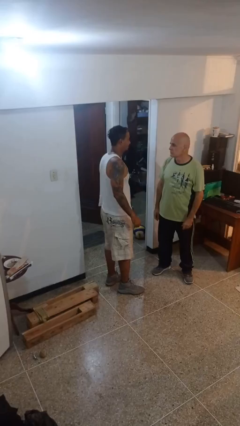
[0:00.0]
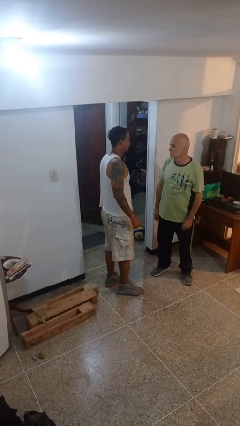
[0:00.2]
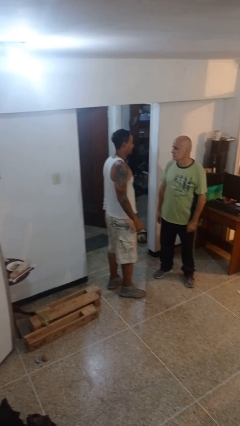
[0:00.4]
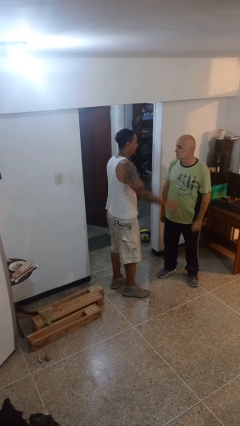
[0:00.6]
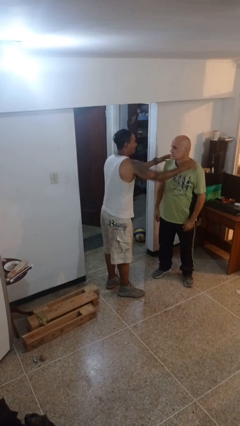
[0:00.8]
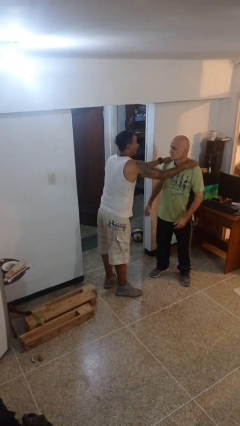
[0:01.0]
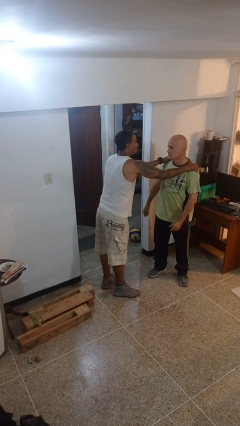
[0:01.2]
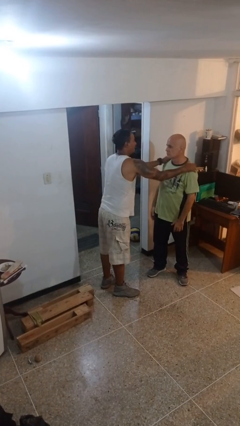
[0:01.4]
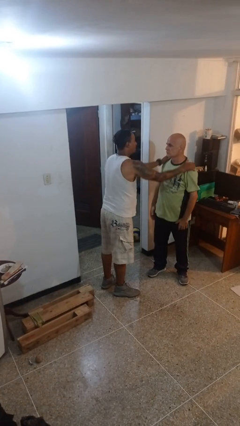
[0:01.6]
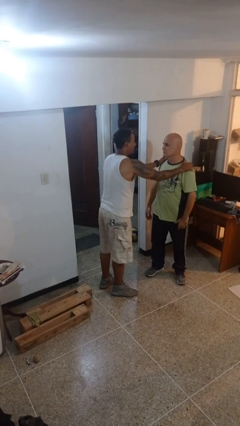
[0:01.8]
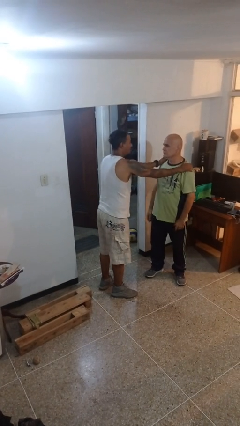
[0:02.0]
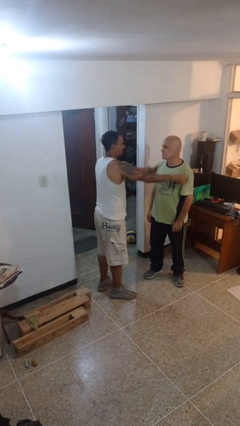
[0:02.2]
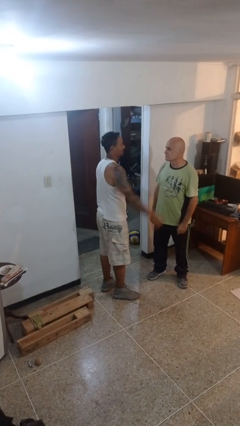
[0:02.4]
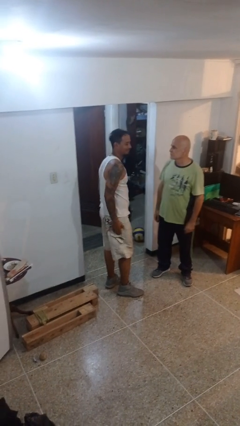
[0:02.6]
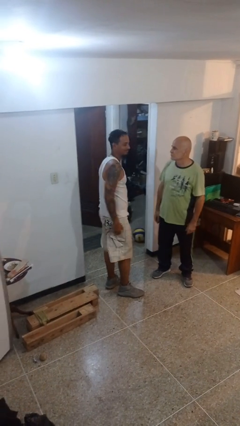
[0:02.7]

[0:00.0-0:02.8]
person pounds shoulders of person

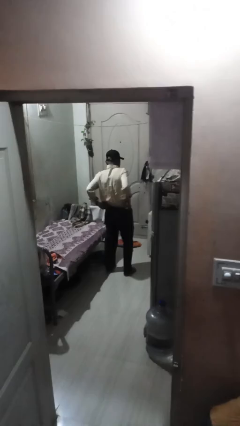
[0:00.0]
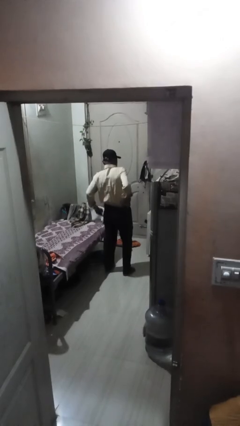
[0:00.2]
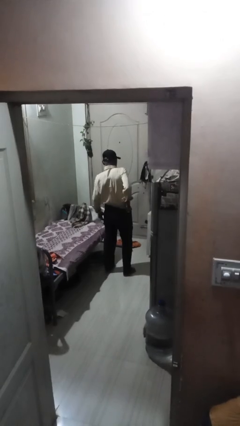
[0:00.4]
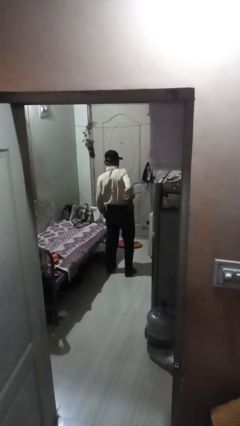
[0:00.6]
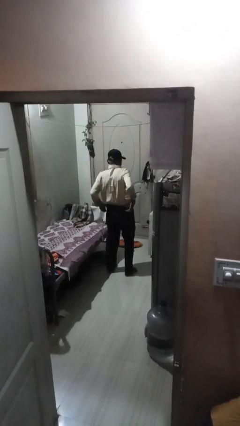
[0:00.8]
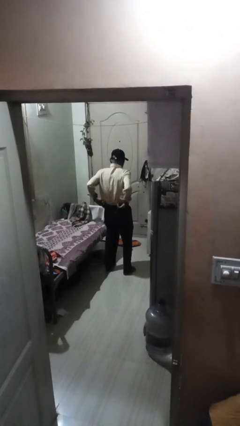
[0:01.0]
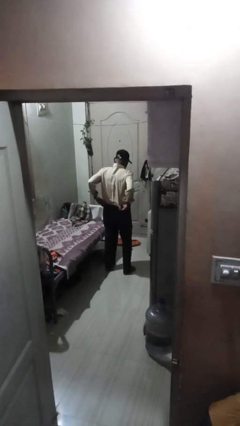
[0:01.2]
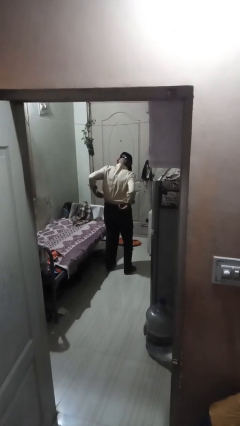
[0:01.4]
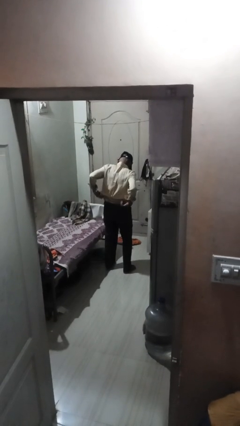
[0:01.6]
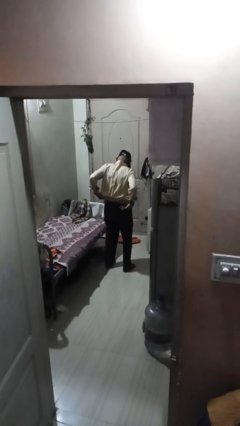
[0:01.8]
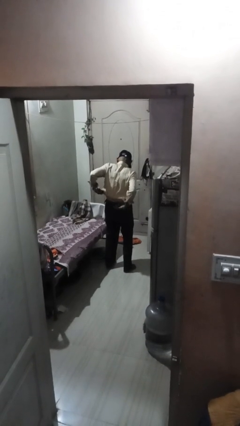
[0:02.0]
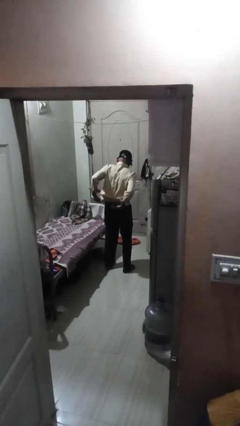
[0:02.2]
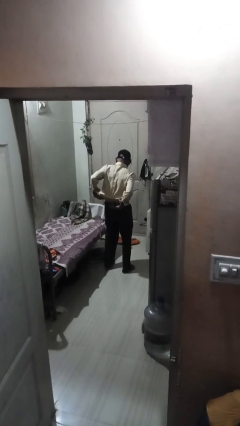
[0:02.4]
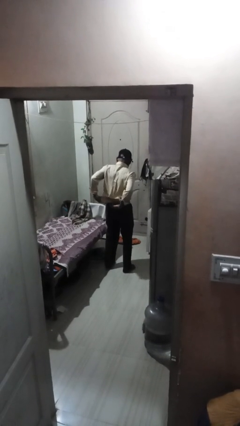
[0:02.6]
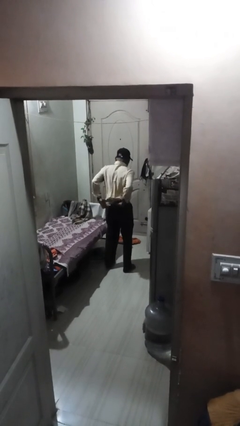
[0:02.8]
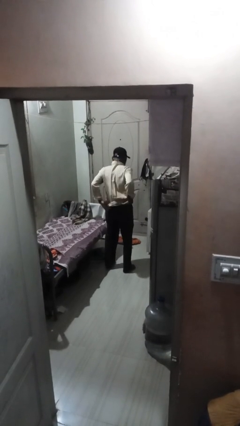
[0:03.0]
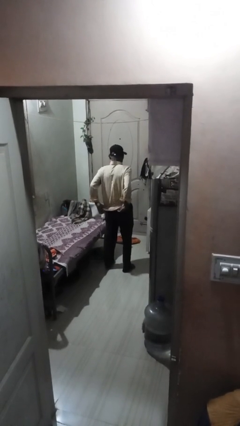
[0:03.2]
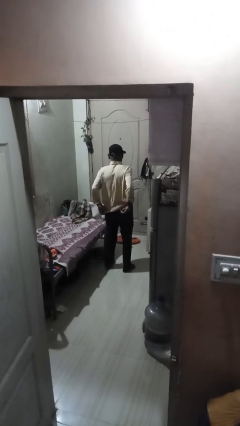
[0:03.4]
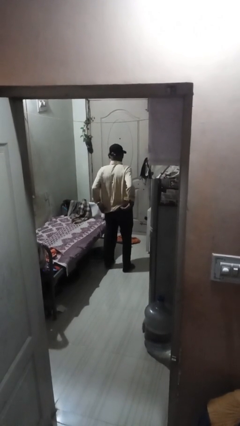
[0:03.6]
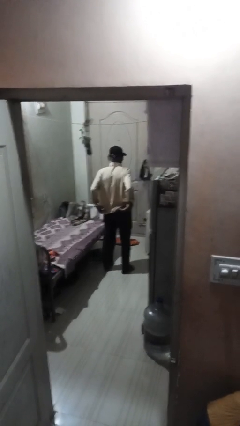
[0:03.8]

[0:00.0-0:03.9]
person untucks shirt

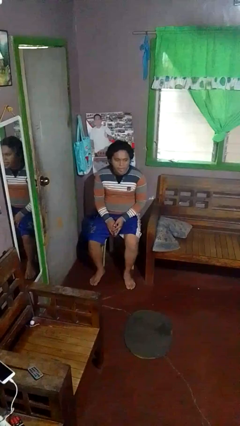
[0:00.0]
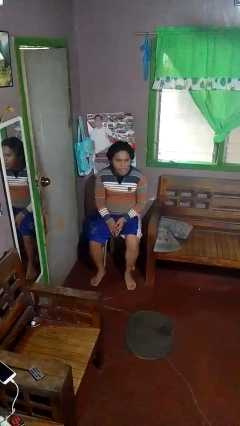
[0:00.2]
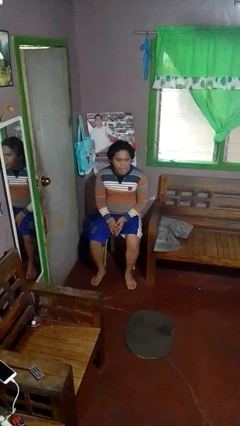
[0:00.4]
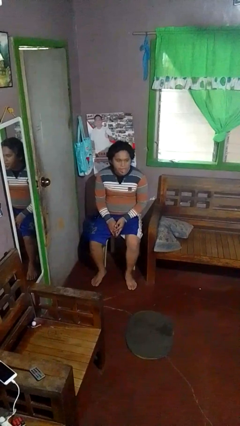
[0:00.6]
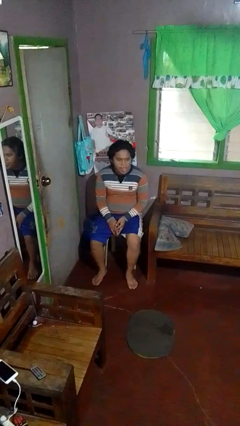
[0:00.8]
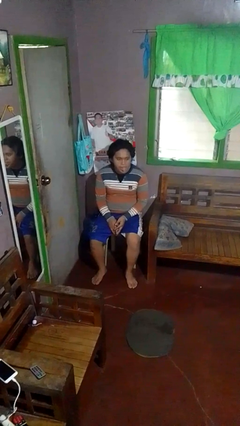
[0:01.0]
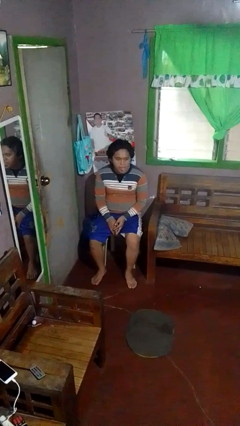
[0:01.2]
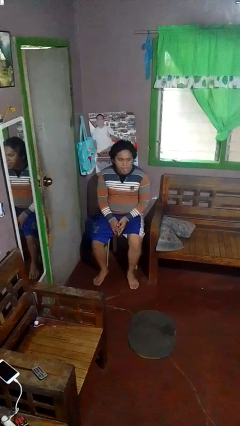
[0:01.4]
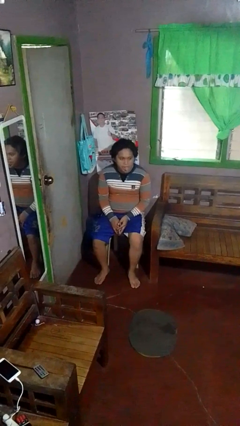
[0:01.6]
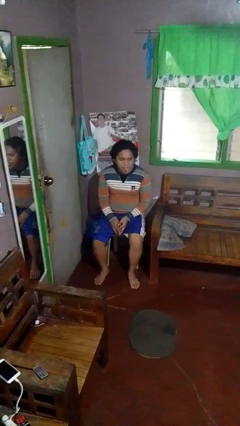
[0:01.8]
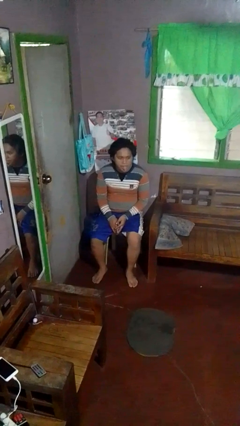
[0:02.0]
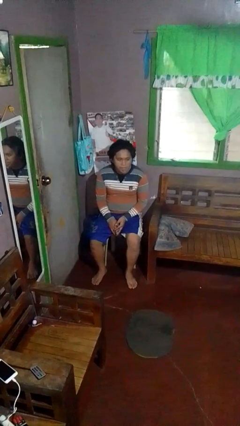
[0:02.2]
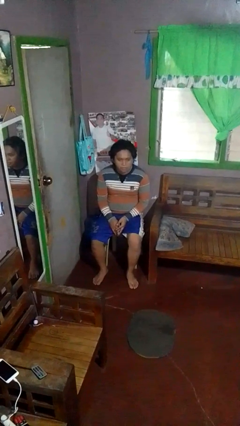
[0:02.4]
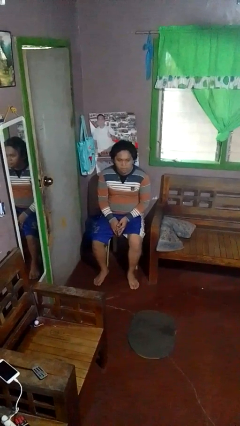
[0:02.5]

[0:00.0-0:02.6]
person sticks out tongue

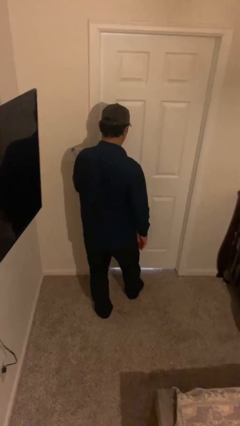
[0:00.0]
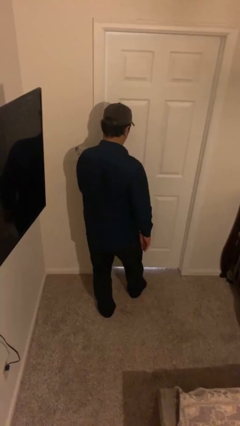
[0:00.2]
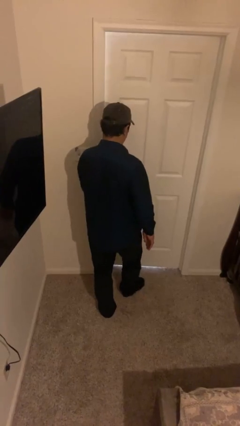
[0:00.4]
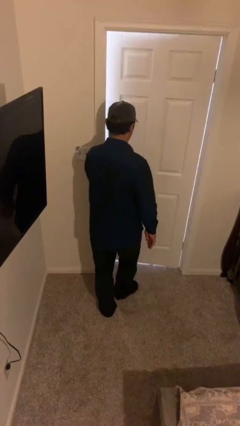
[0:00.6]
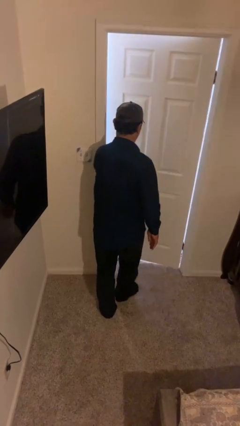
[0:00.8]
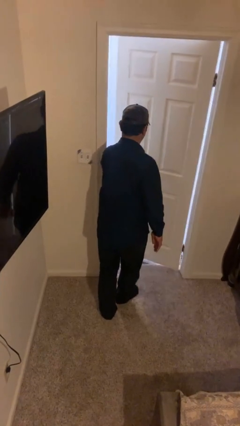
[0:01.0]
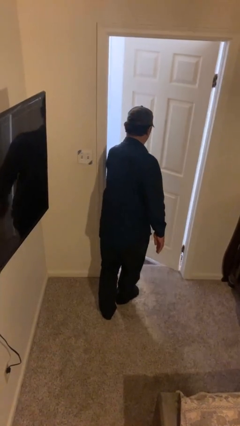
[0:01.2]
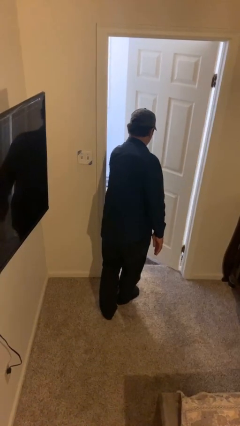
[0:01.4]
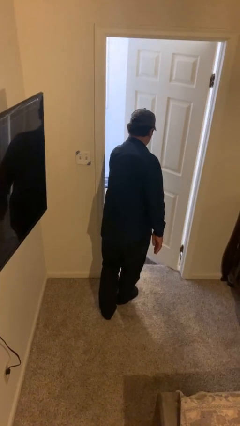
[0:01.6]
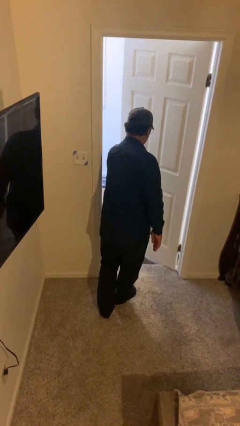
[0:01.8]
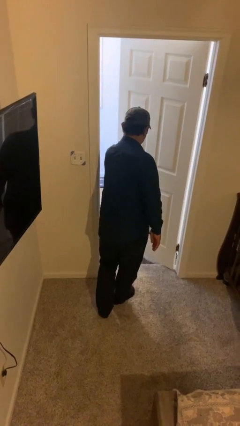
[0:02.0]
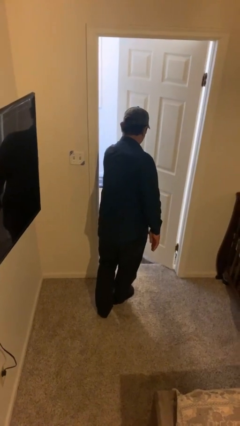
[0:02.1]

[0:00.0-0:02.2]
person opens facility door

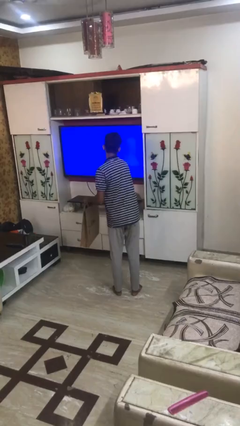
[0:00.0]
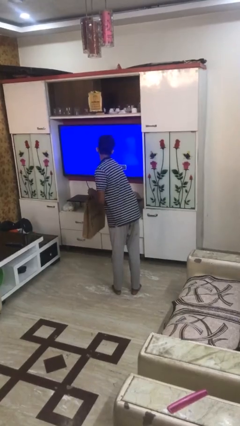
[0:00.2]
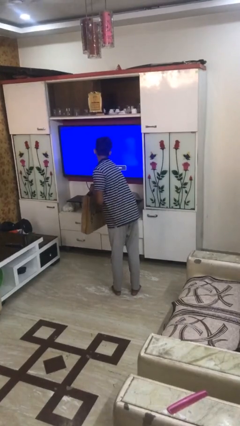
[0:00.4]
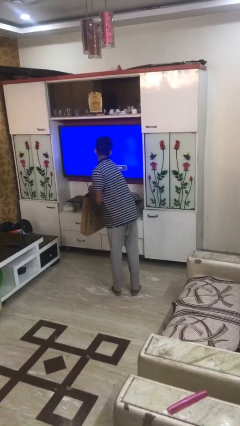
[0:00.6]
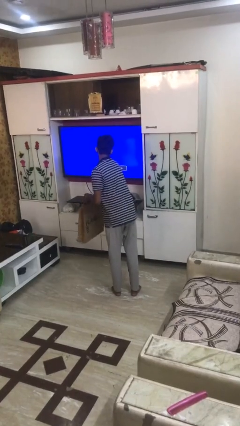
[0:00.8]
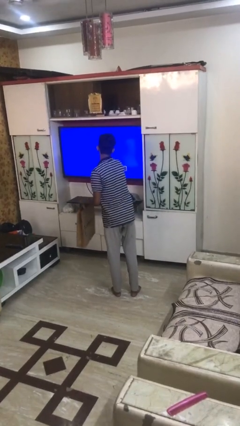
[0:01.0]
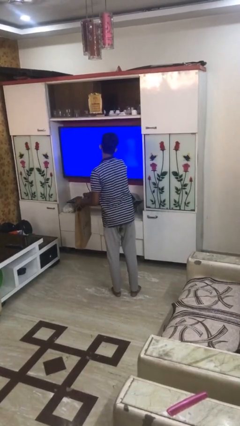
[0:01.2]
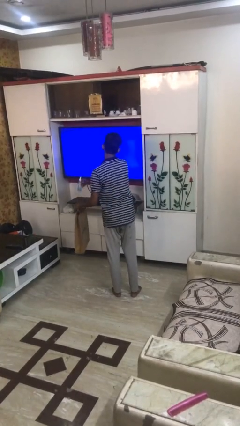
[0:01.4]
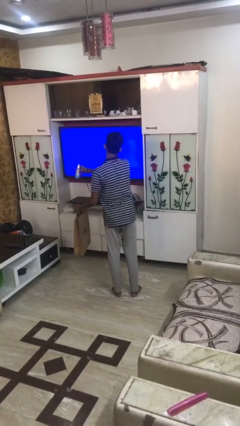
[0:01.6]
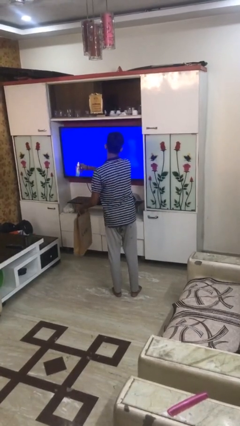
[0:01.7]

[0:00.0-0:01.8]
person takes object from bag

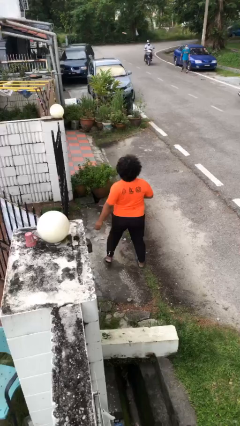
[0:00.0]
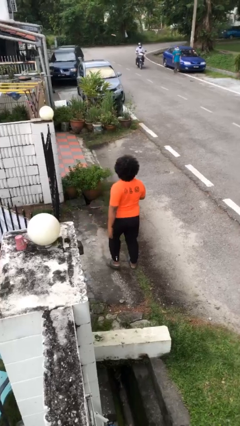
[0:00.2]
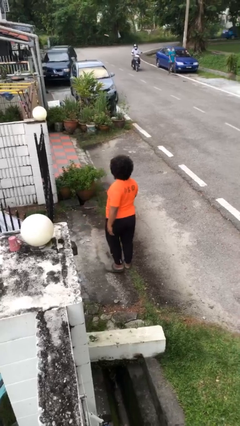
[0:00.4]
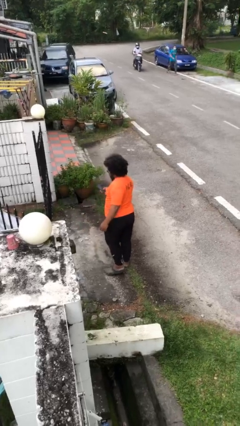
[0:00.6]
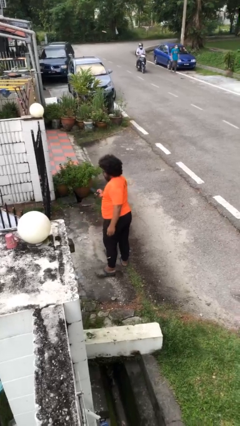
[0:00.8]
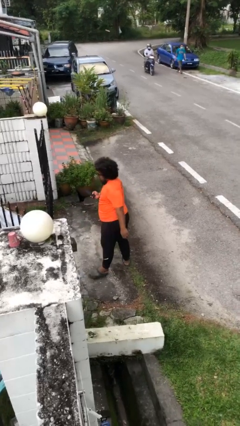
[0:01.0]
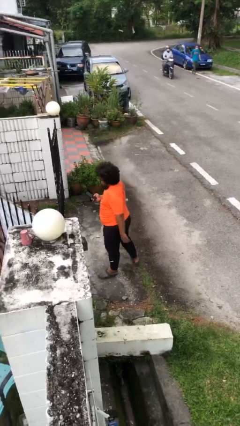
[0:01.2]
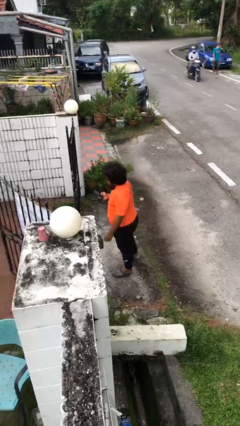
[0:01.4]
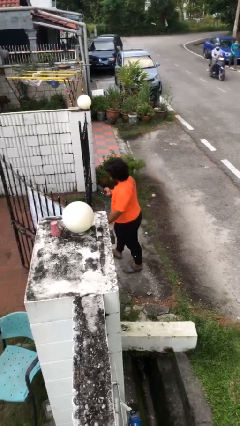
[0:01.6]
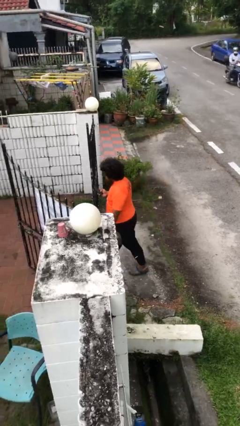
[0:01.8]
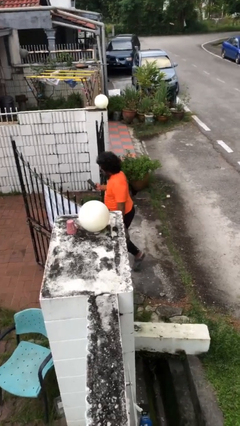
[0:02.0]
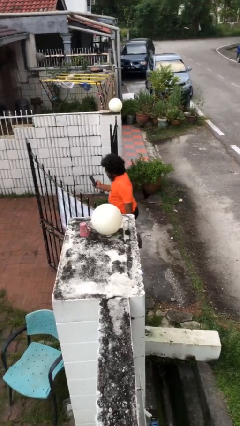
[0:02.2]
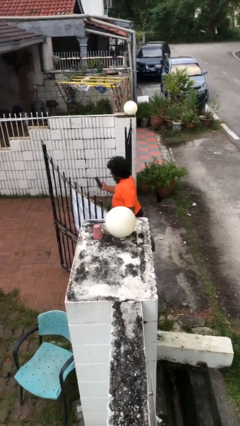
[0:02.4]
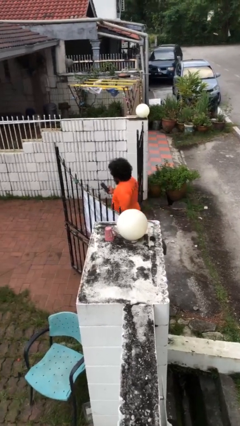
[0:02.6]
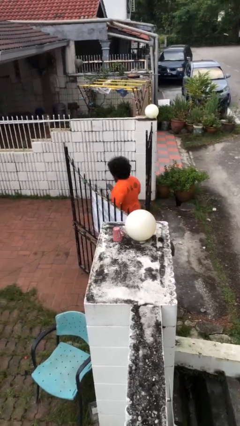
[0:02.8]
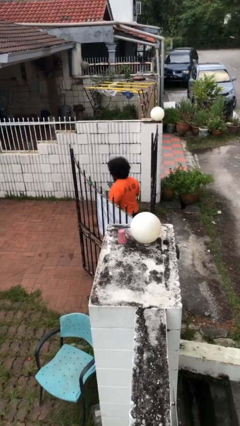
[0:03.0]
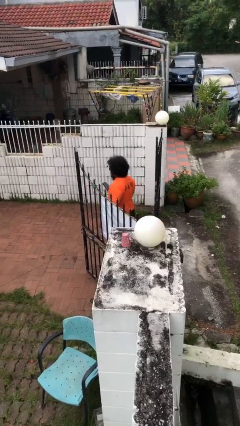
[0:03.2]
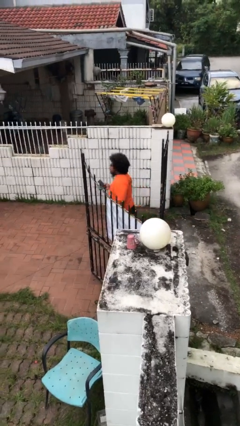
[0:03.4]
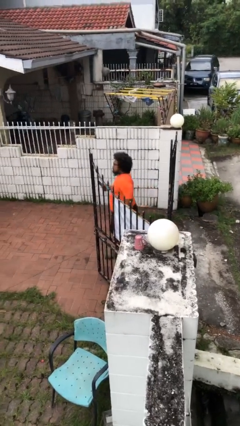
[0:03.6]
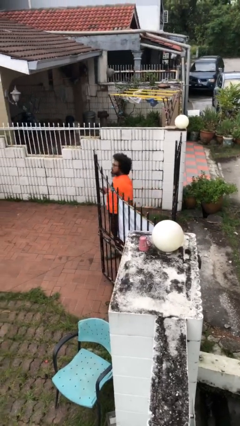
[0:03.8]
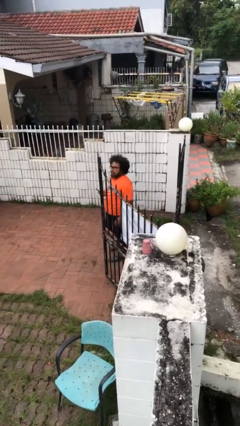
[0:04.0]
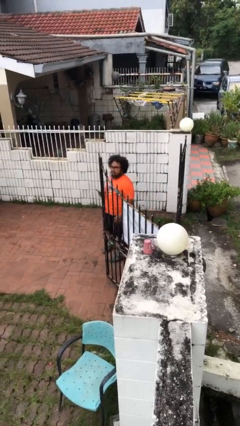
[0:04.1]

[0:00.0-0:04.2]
person enters scene through structure
